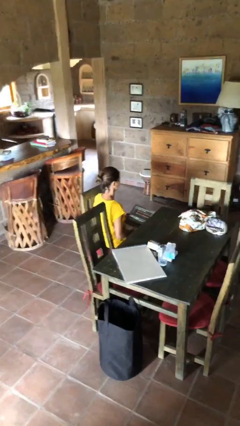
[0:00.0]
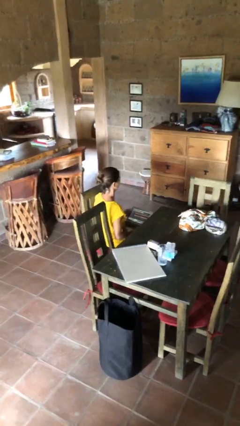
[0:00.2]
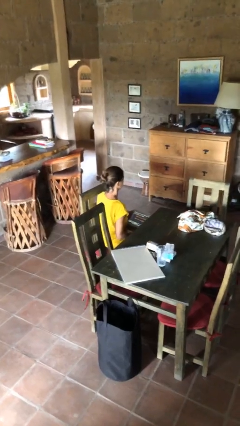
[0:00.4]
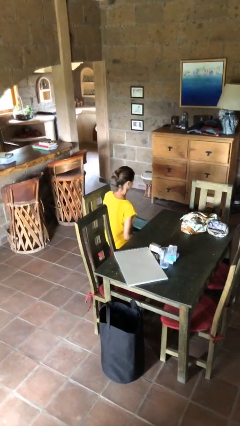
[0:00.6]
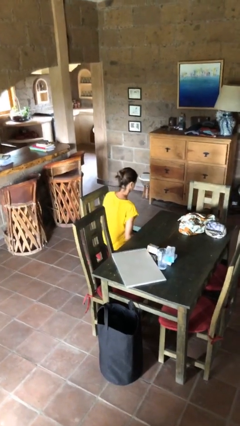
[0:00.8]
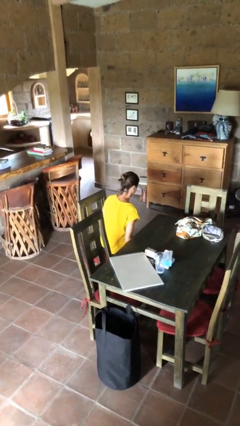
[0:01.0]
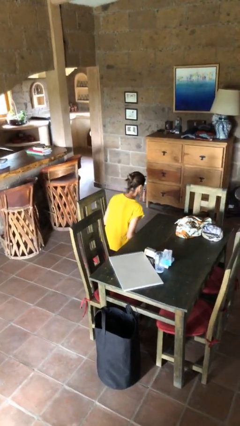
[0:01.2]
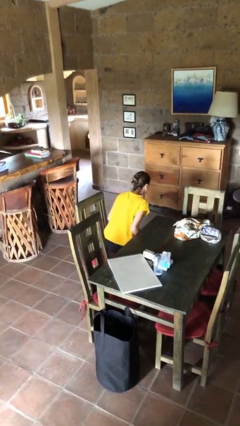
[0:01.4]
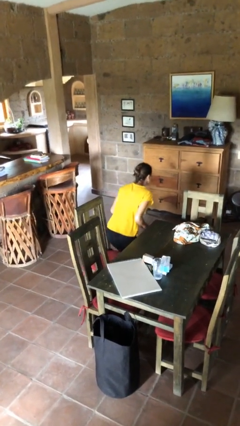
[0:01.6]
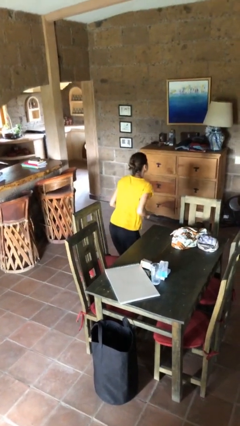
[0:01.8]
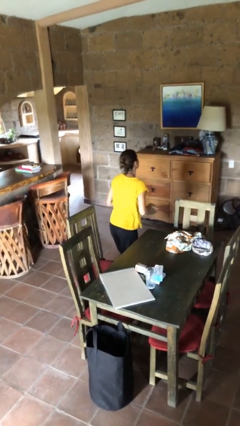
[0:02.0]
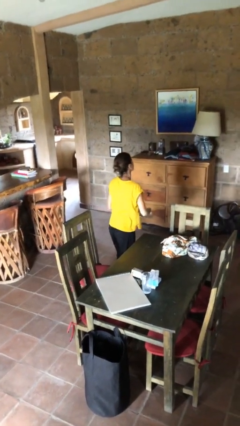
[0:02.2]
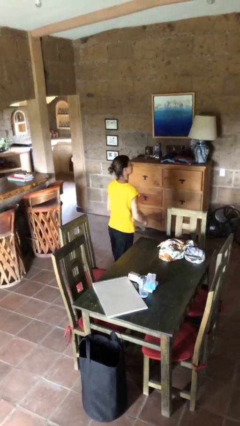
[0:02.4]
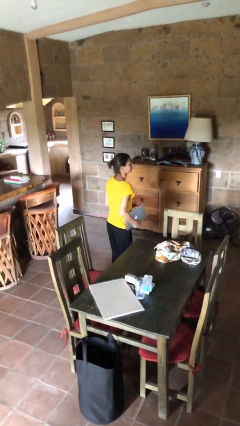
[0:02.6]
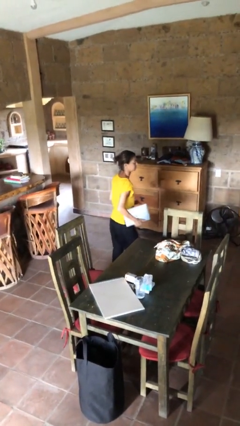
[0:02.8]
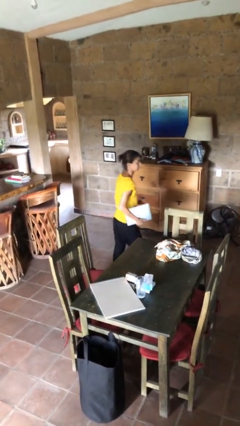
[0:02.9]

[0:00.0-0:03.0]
person stands up

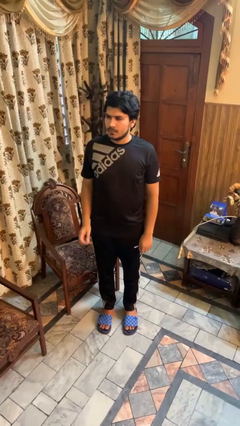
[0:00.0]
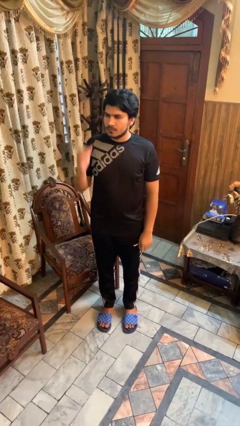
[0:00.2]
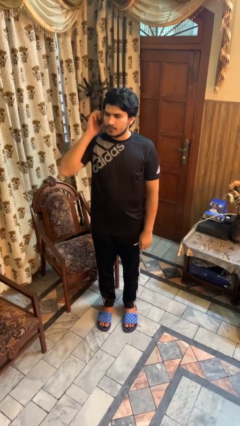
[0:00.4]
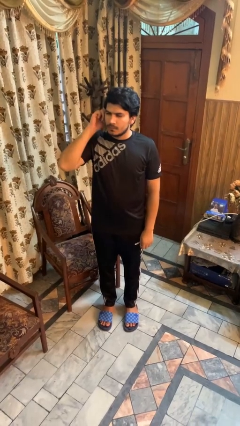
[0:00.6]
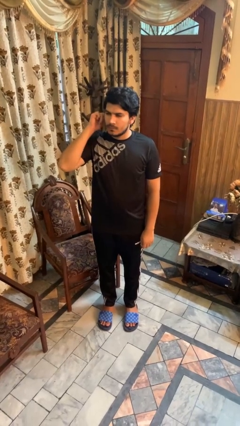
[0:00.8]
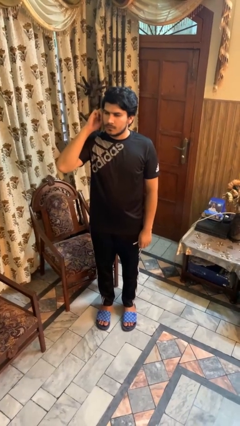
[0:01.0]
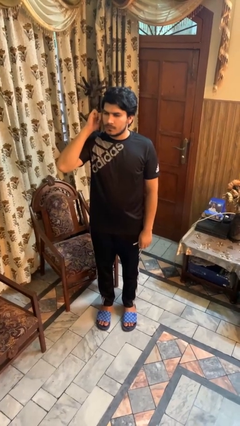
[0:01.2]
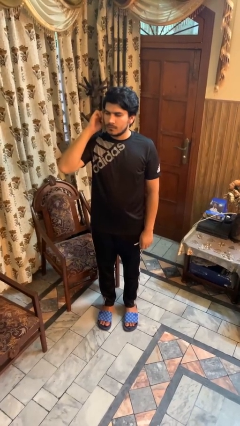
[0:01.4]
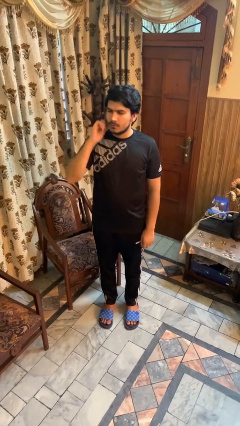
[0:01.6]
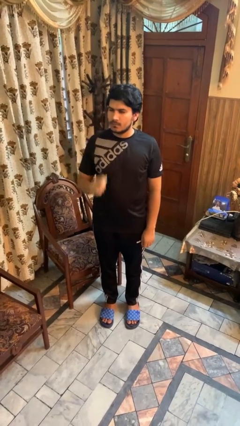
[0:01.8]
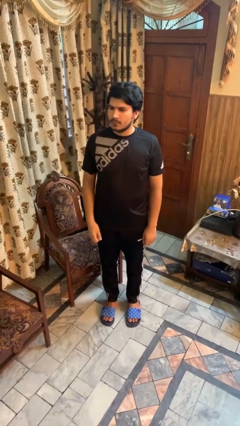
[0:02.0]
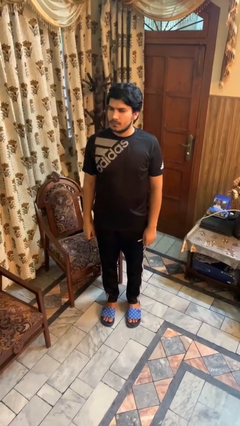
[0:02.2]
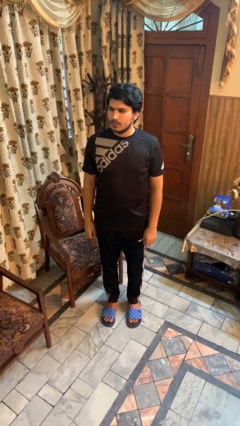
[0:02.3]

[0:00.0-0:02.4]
person touches earlobe

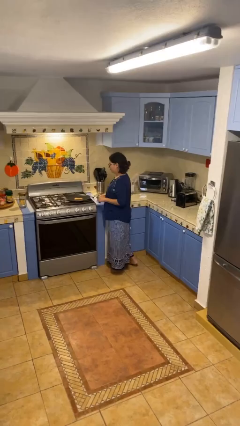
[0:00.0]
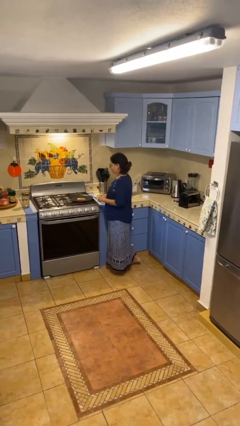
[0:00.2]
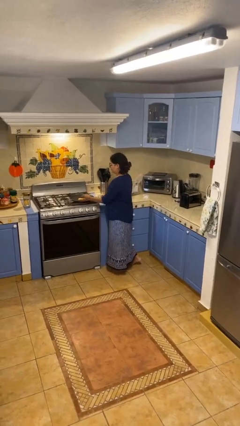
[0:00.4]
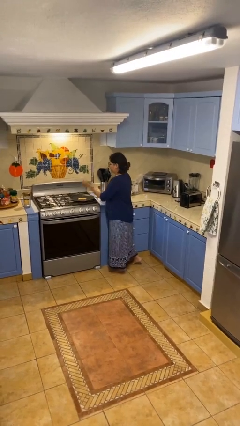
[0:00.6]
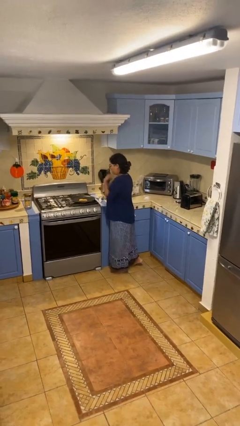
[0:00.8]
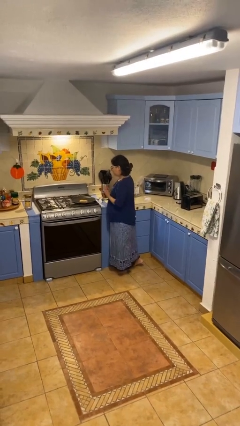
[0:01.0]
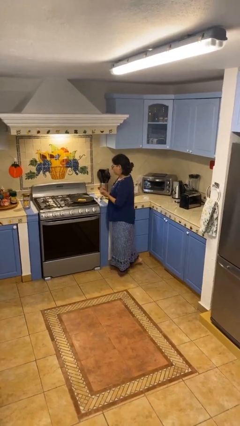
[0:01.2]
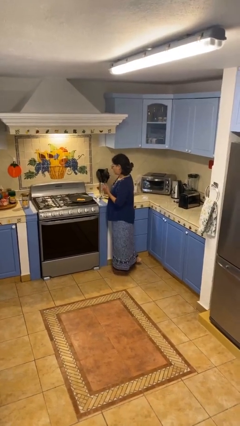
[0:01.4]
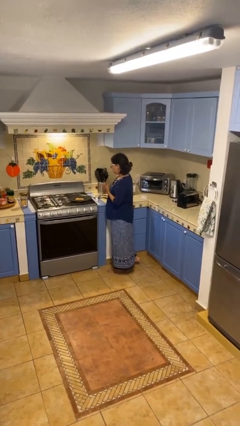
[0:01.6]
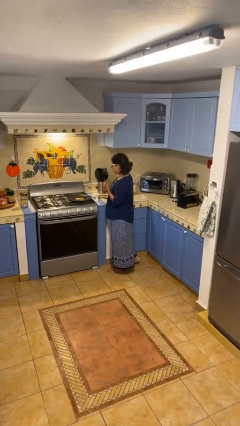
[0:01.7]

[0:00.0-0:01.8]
person burns hand

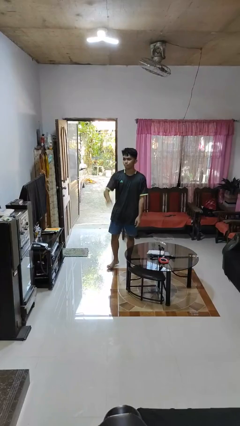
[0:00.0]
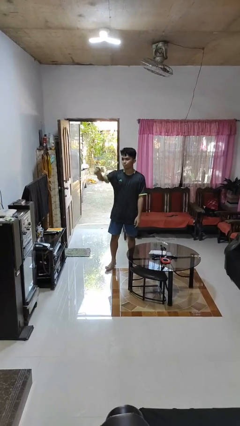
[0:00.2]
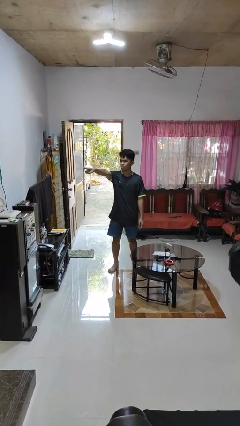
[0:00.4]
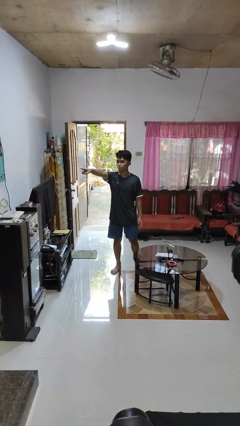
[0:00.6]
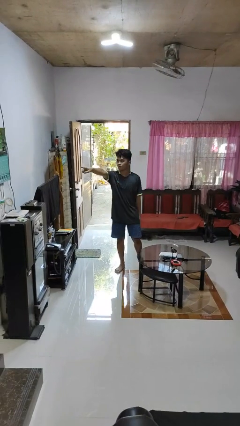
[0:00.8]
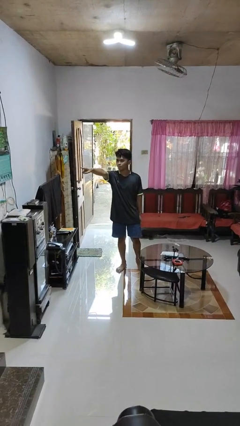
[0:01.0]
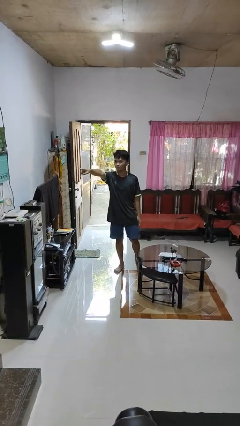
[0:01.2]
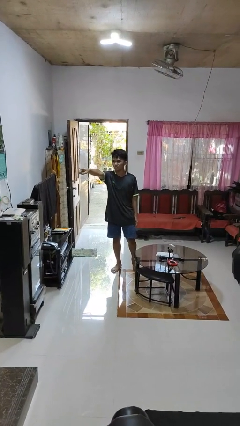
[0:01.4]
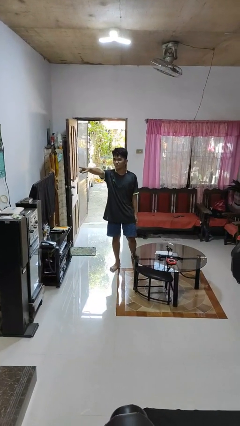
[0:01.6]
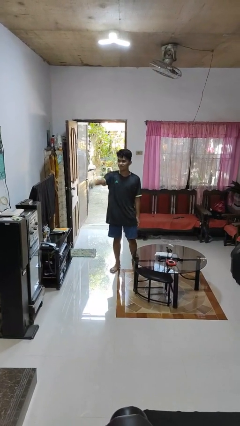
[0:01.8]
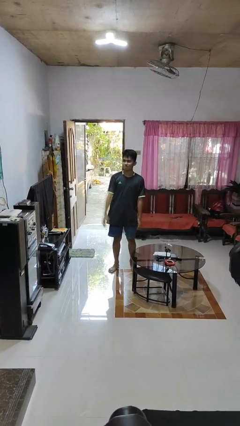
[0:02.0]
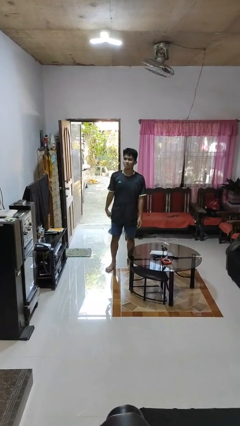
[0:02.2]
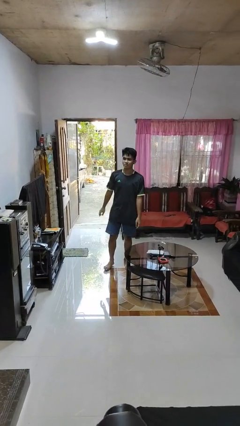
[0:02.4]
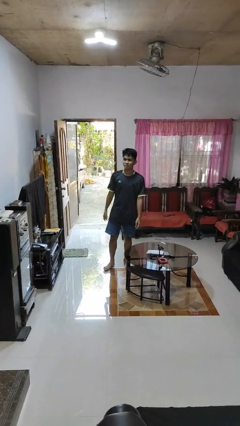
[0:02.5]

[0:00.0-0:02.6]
person points at person

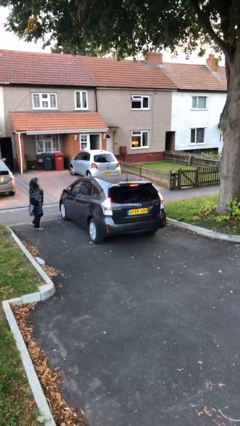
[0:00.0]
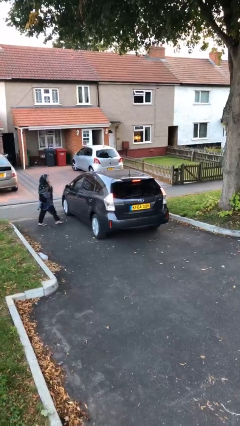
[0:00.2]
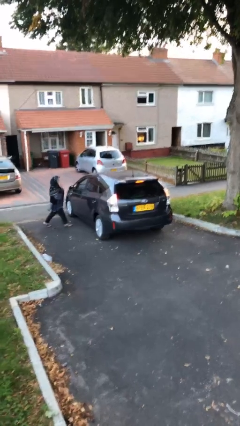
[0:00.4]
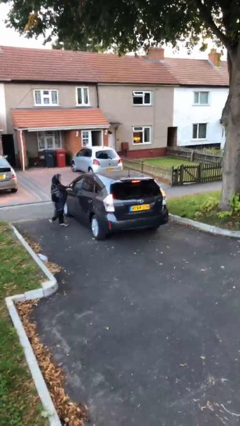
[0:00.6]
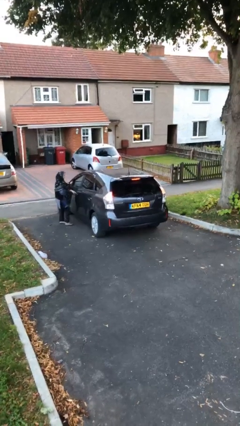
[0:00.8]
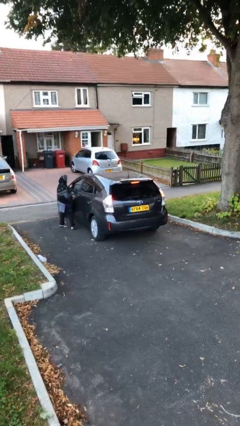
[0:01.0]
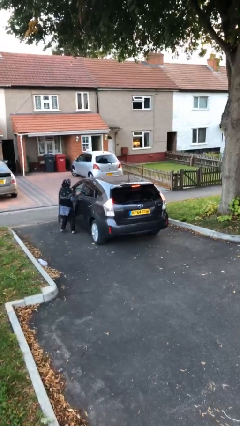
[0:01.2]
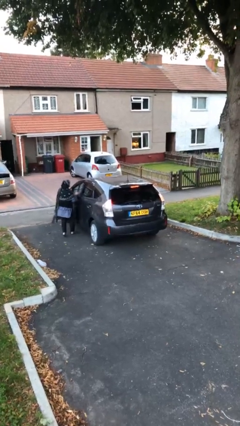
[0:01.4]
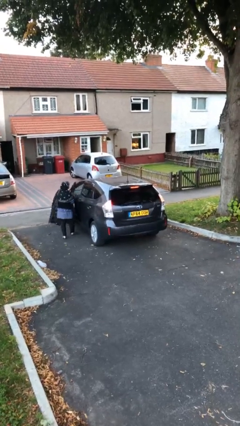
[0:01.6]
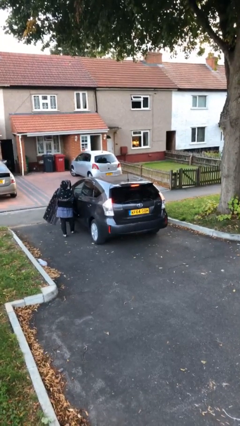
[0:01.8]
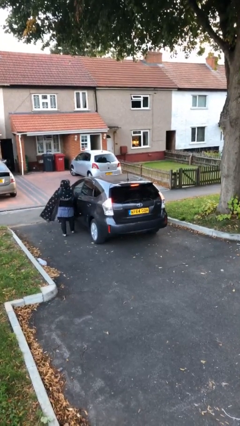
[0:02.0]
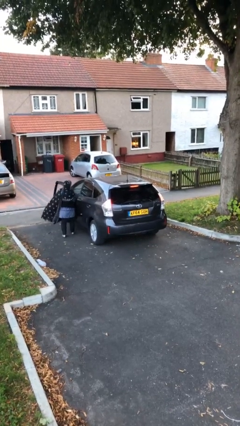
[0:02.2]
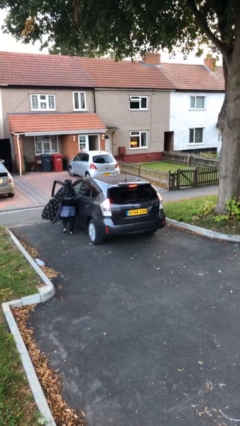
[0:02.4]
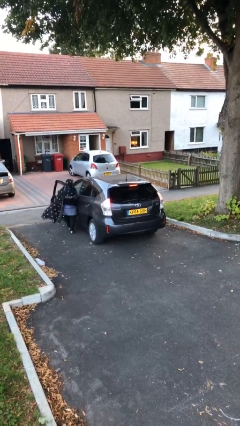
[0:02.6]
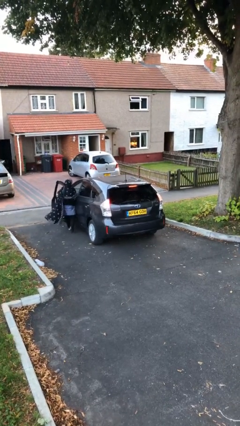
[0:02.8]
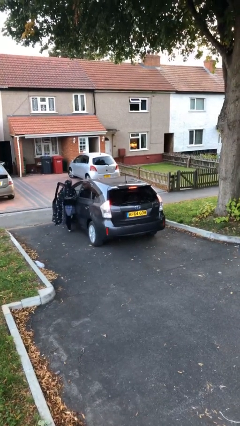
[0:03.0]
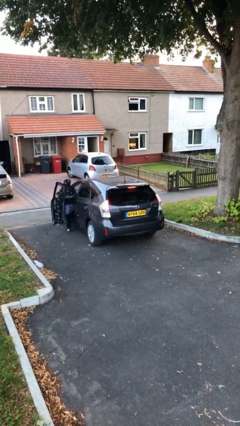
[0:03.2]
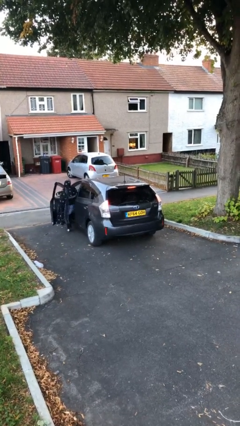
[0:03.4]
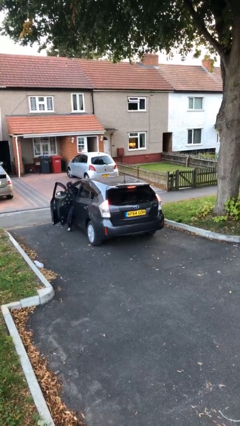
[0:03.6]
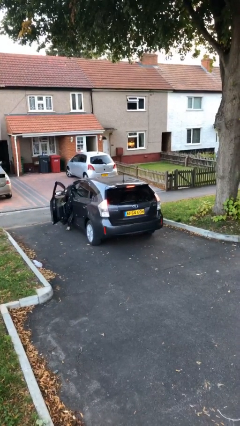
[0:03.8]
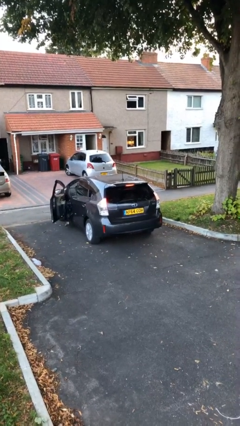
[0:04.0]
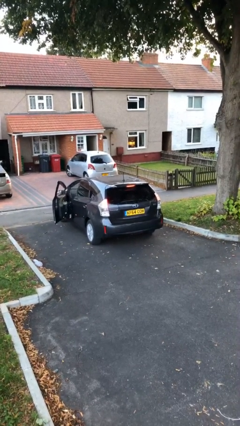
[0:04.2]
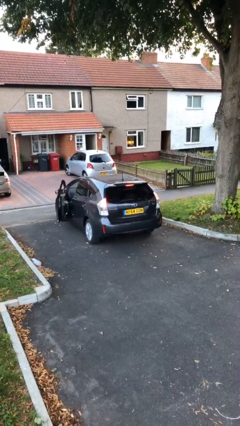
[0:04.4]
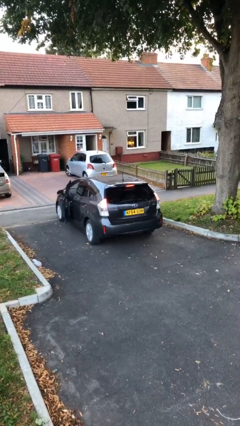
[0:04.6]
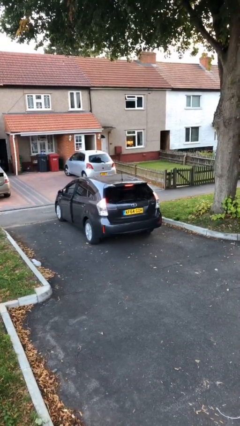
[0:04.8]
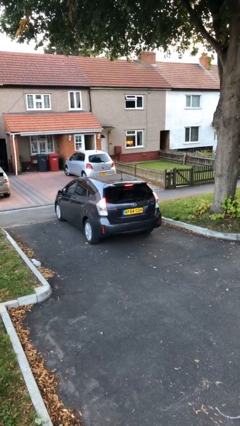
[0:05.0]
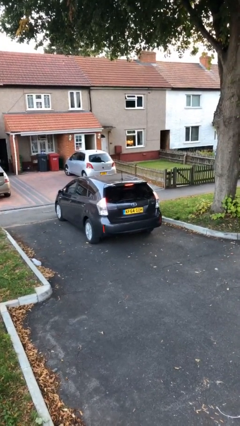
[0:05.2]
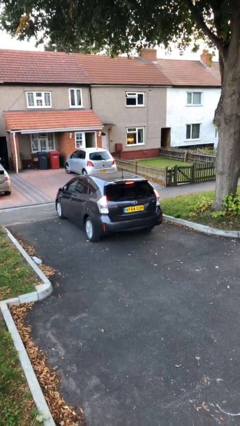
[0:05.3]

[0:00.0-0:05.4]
car picks up person

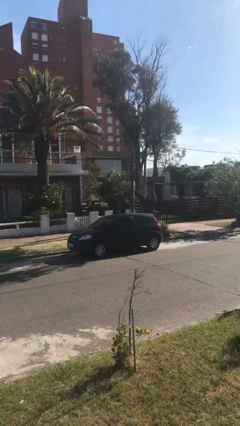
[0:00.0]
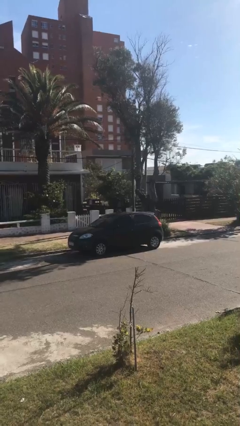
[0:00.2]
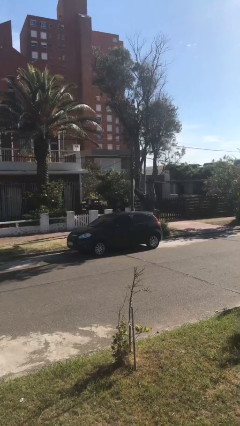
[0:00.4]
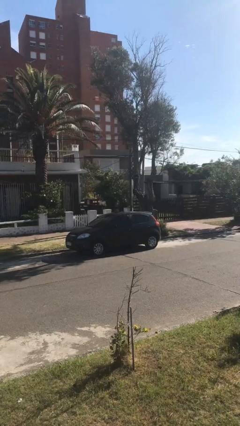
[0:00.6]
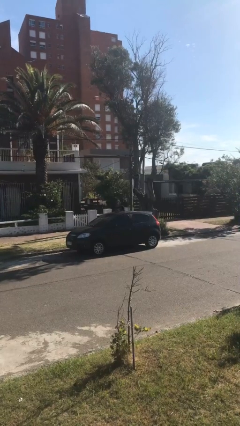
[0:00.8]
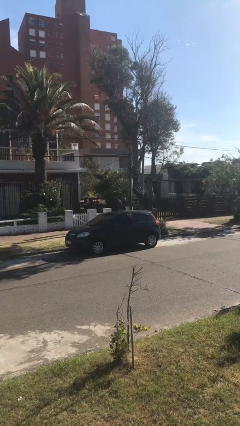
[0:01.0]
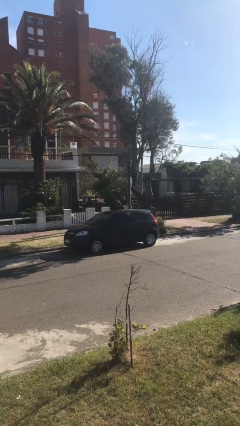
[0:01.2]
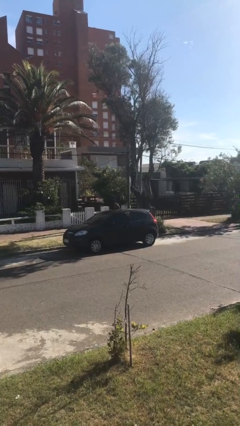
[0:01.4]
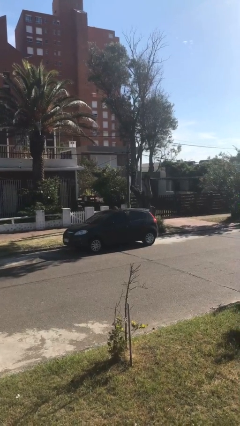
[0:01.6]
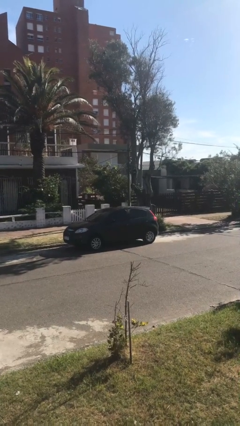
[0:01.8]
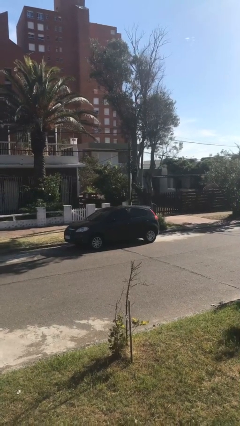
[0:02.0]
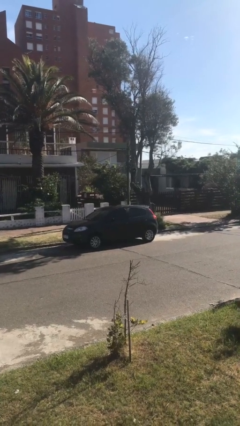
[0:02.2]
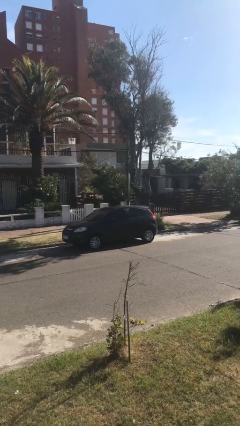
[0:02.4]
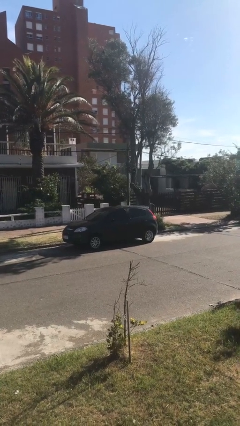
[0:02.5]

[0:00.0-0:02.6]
person enters car
